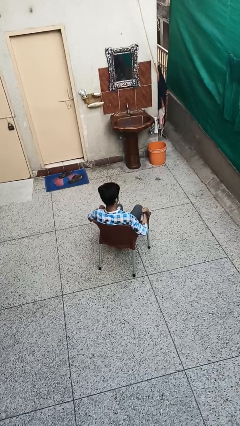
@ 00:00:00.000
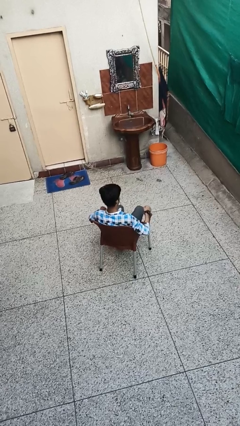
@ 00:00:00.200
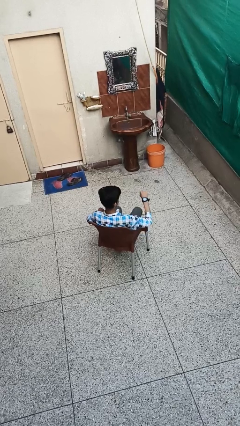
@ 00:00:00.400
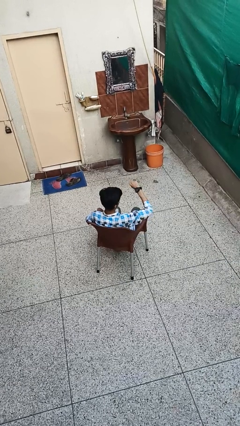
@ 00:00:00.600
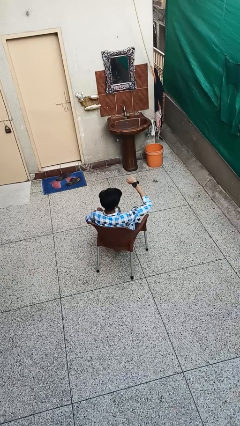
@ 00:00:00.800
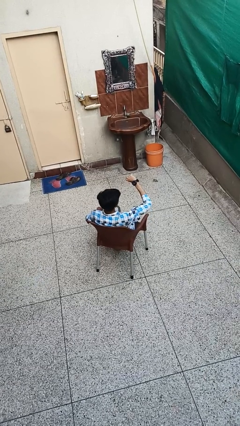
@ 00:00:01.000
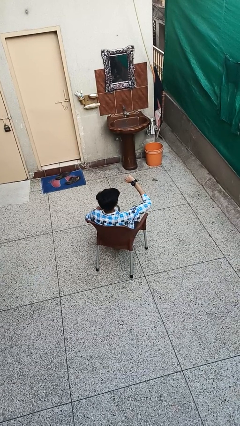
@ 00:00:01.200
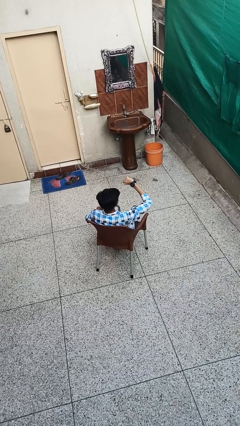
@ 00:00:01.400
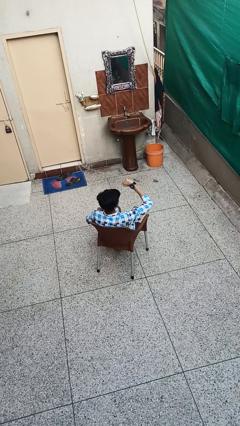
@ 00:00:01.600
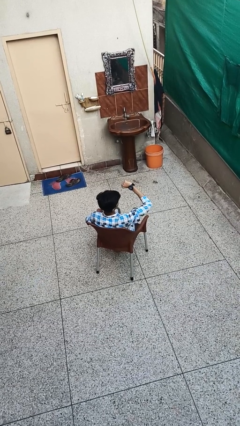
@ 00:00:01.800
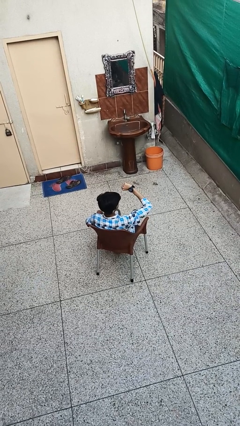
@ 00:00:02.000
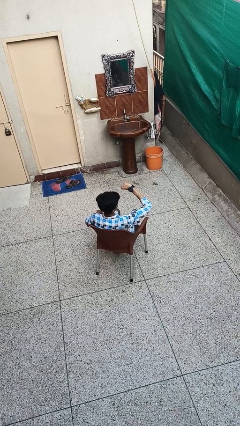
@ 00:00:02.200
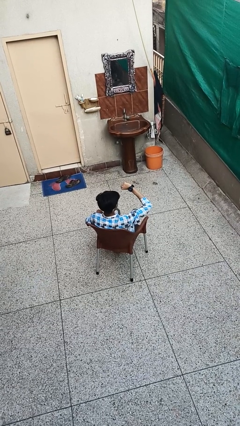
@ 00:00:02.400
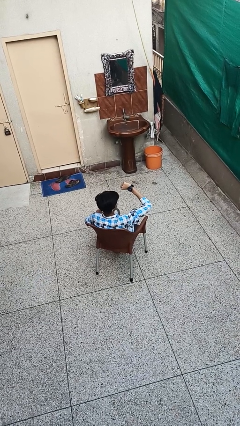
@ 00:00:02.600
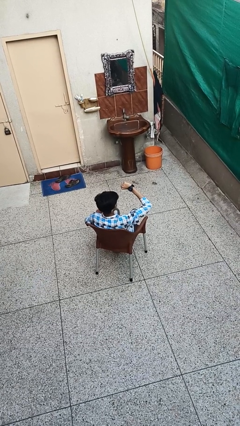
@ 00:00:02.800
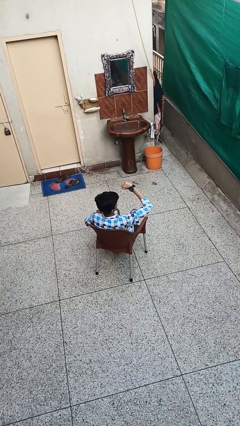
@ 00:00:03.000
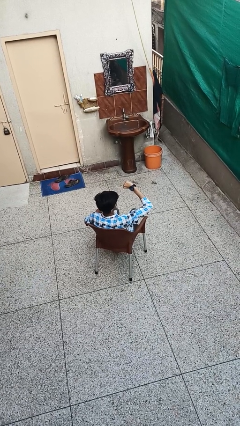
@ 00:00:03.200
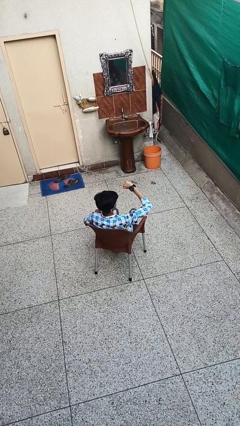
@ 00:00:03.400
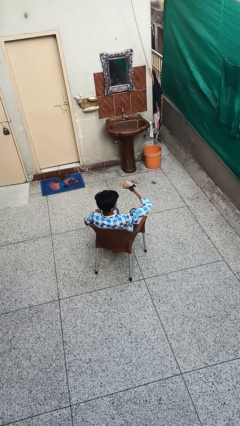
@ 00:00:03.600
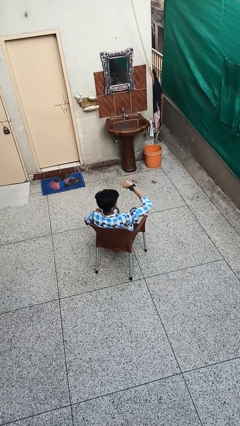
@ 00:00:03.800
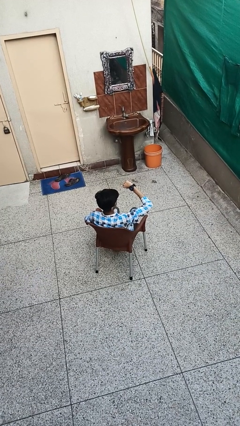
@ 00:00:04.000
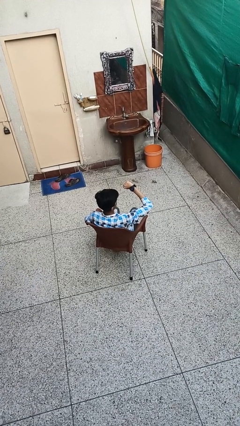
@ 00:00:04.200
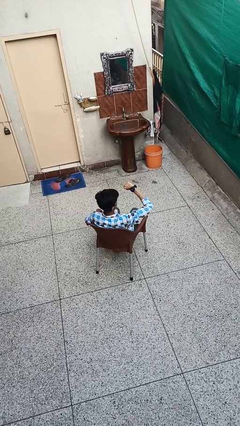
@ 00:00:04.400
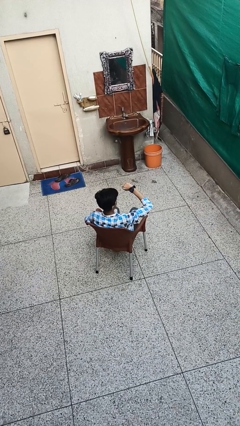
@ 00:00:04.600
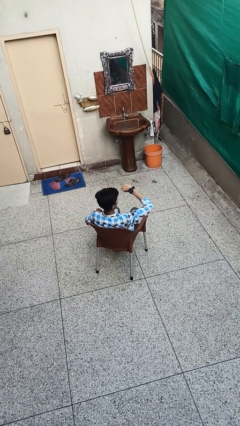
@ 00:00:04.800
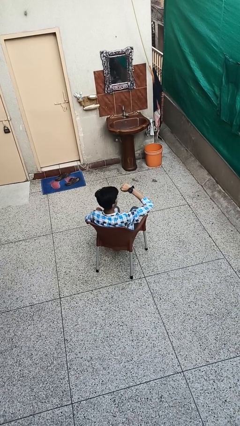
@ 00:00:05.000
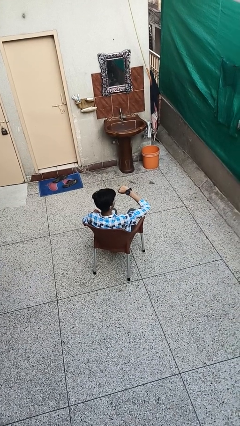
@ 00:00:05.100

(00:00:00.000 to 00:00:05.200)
person looks at wristwatch

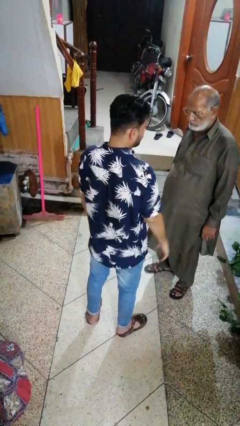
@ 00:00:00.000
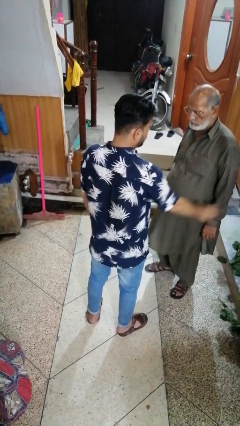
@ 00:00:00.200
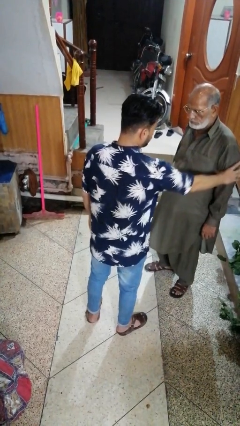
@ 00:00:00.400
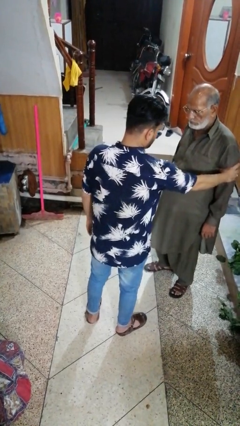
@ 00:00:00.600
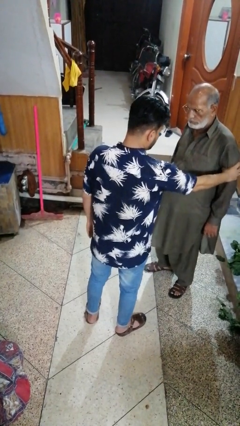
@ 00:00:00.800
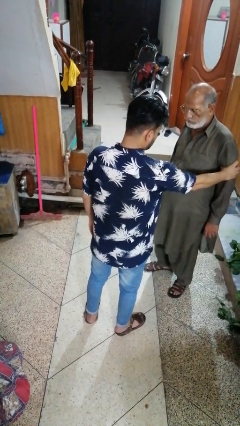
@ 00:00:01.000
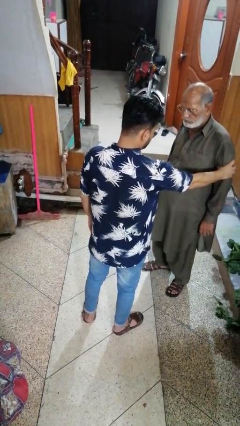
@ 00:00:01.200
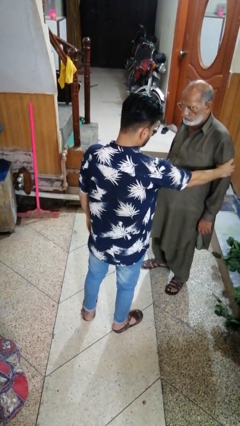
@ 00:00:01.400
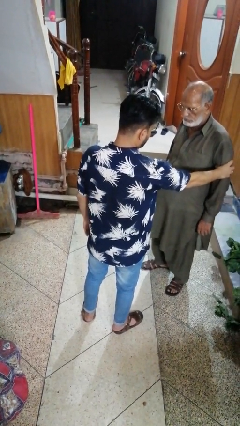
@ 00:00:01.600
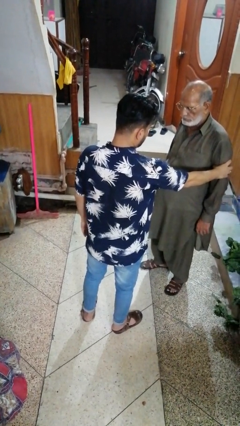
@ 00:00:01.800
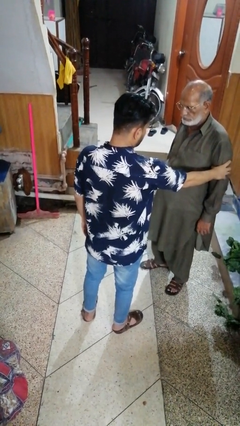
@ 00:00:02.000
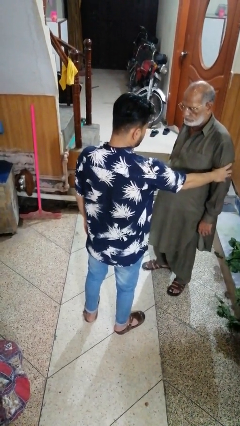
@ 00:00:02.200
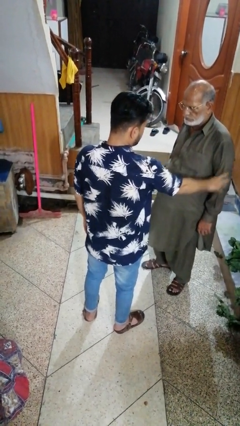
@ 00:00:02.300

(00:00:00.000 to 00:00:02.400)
person grabs person by bicep

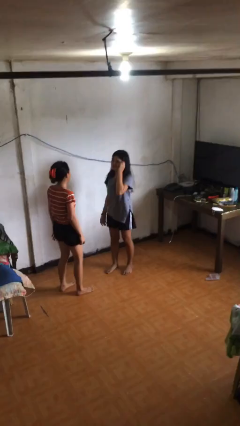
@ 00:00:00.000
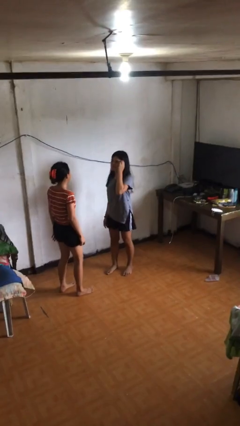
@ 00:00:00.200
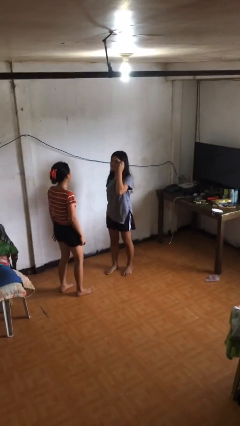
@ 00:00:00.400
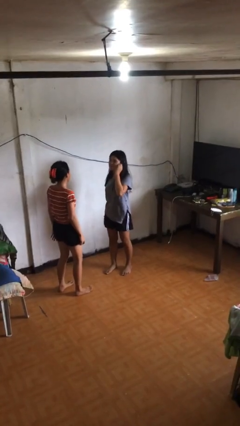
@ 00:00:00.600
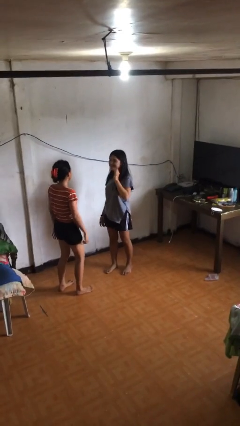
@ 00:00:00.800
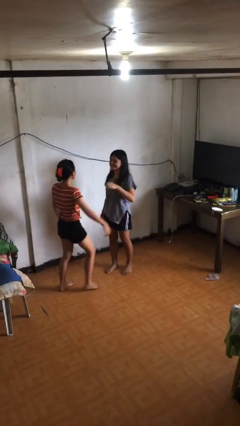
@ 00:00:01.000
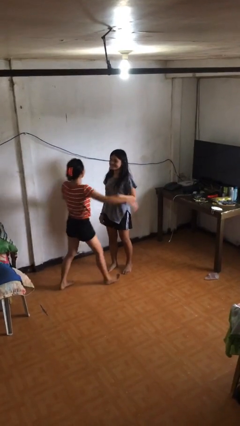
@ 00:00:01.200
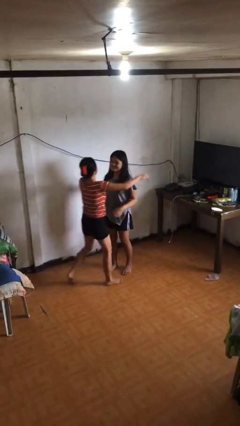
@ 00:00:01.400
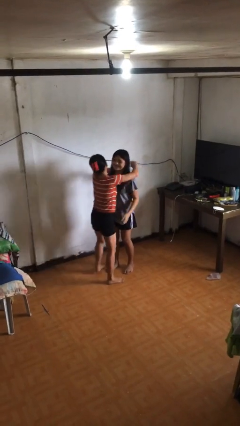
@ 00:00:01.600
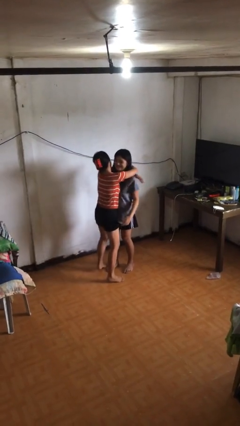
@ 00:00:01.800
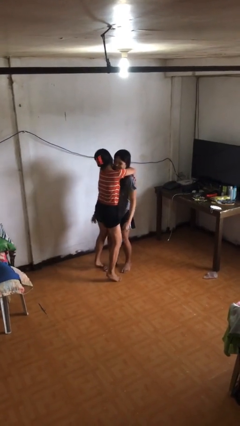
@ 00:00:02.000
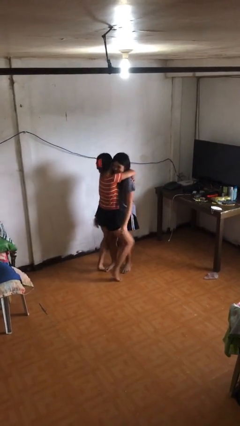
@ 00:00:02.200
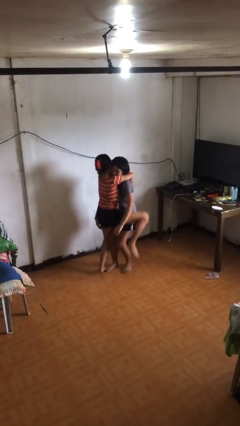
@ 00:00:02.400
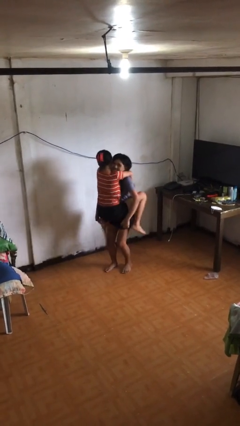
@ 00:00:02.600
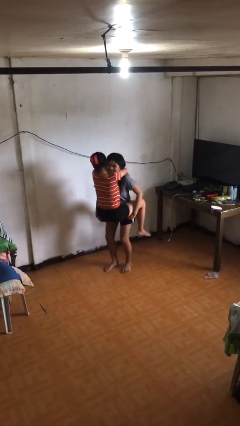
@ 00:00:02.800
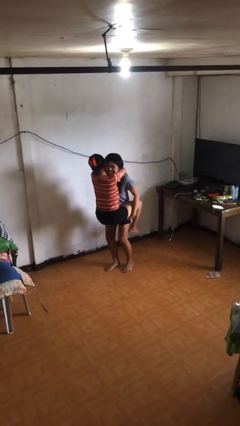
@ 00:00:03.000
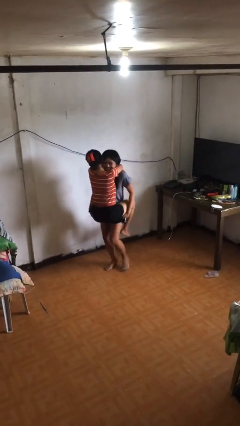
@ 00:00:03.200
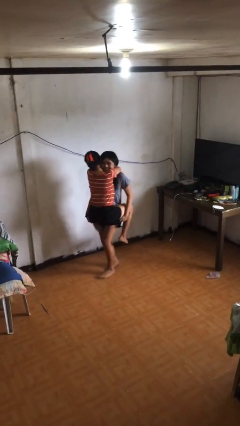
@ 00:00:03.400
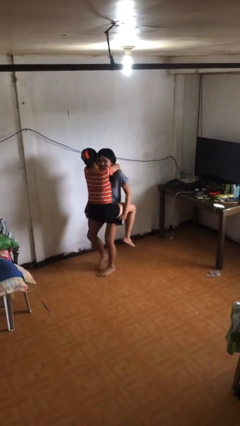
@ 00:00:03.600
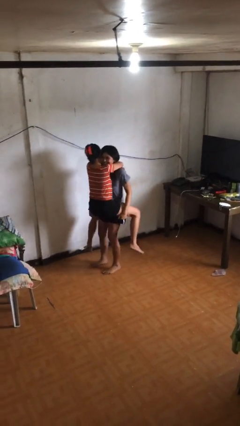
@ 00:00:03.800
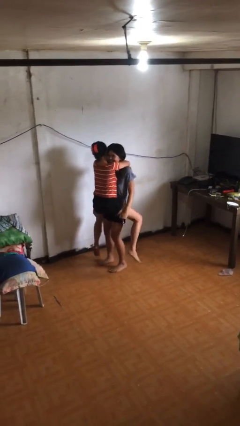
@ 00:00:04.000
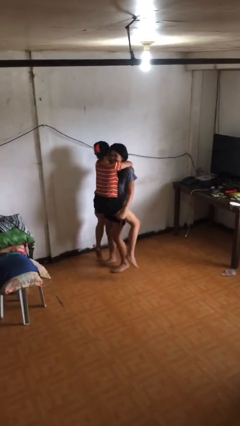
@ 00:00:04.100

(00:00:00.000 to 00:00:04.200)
person picks up person

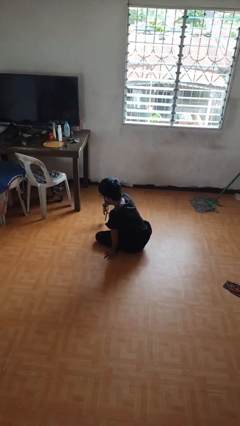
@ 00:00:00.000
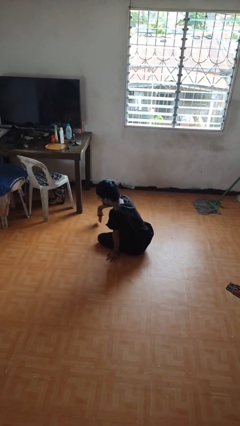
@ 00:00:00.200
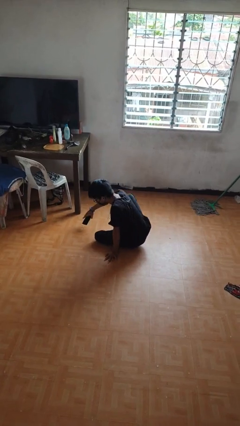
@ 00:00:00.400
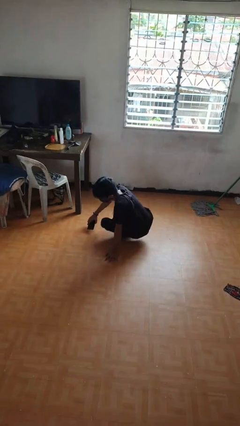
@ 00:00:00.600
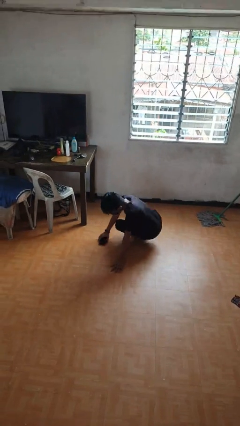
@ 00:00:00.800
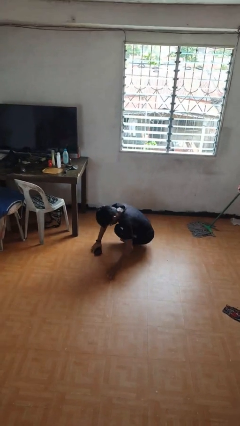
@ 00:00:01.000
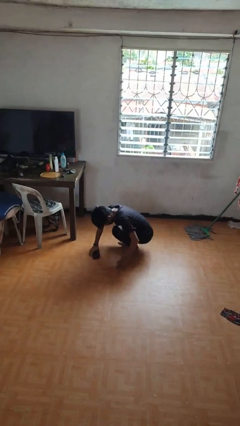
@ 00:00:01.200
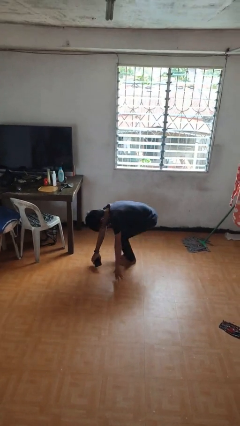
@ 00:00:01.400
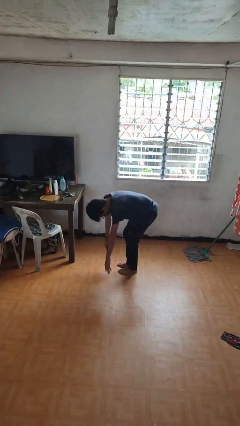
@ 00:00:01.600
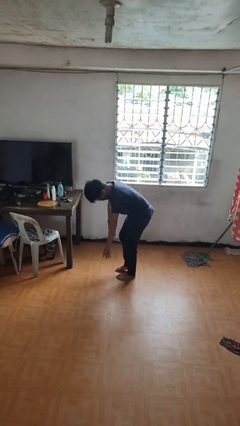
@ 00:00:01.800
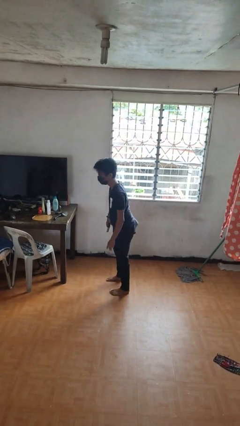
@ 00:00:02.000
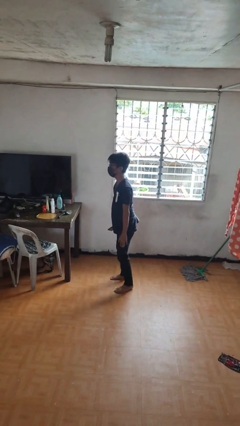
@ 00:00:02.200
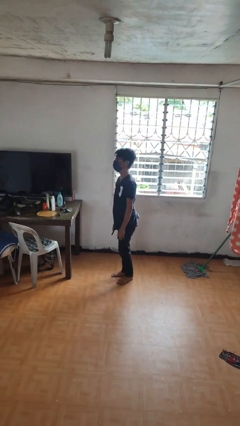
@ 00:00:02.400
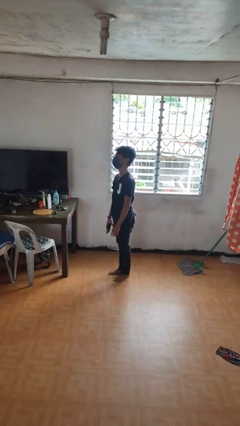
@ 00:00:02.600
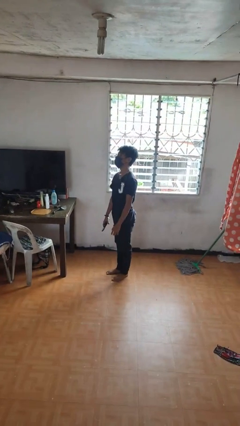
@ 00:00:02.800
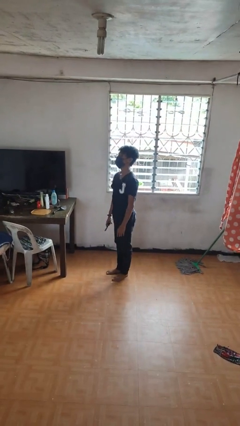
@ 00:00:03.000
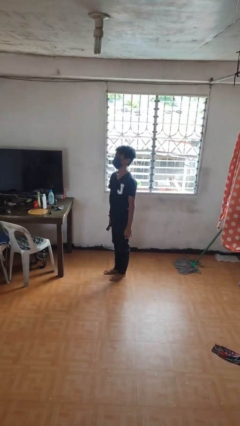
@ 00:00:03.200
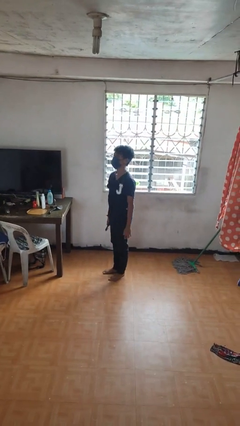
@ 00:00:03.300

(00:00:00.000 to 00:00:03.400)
person stands up from floor

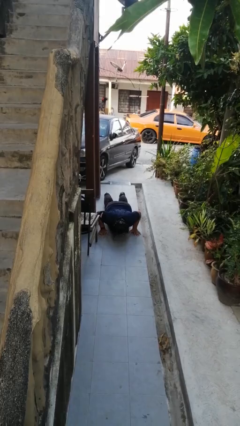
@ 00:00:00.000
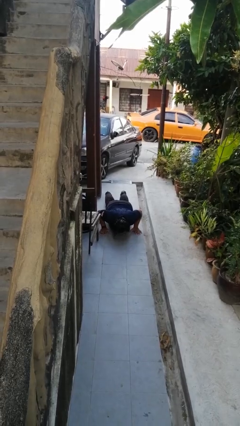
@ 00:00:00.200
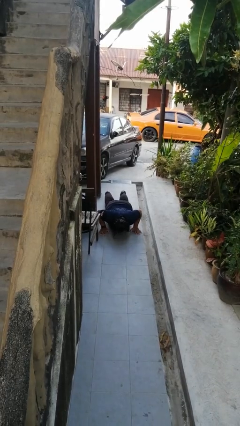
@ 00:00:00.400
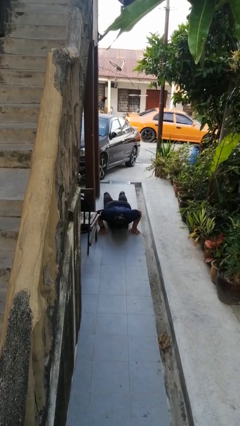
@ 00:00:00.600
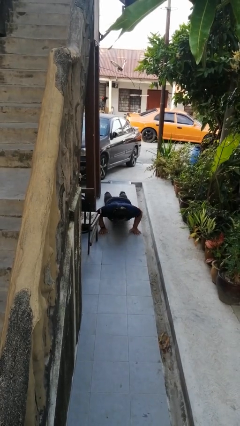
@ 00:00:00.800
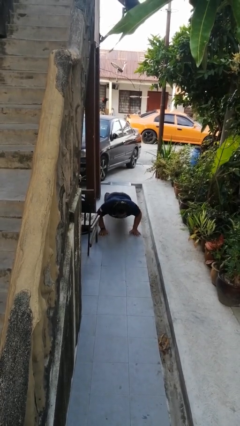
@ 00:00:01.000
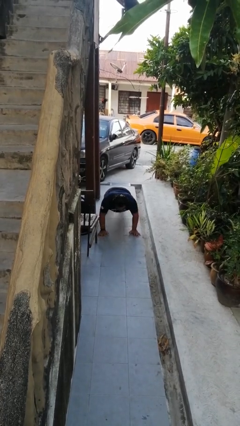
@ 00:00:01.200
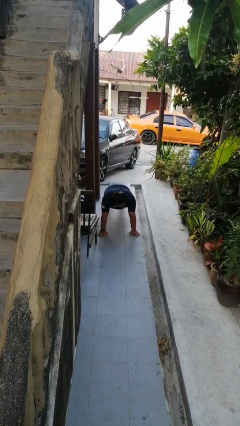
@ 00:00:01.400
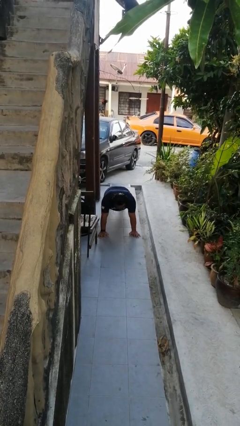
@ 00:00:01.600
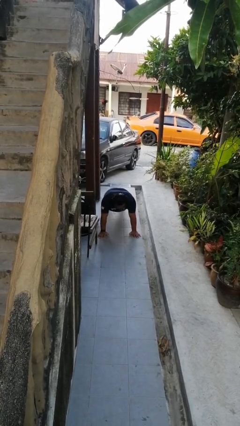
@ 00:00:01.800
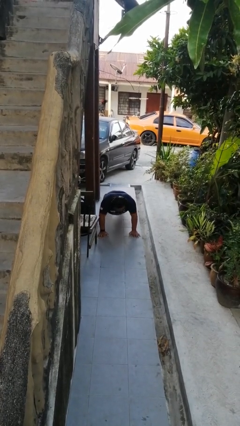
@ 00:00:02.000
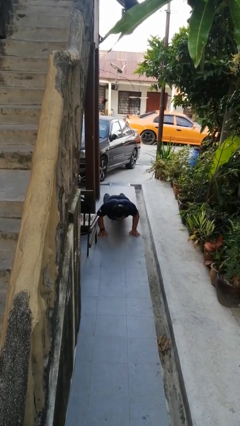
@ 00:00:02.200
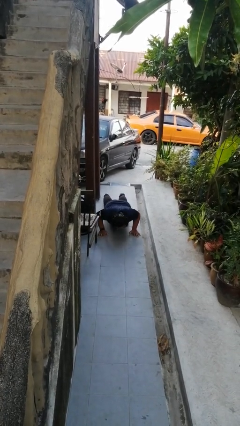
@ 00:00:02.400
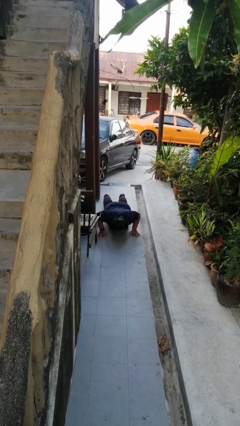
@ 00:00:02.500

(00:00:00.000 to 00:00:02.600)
person exercises with pushup
